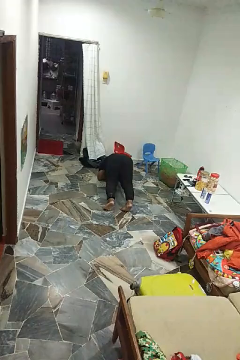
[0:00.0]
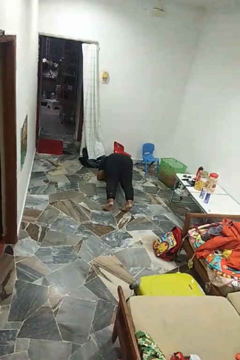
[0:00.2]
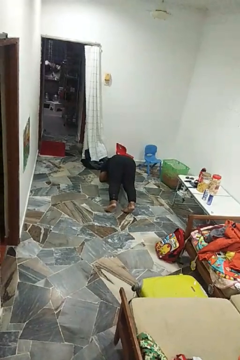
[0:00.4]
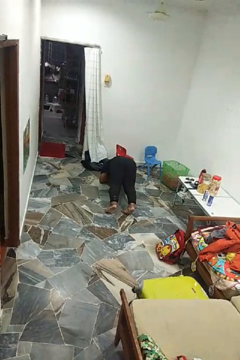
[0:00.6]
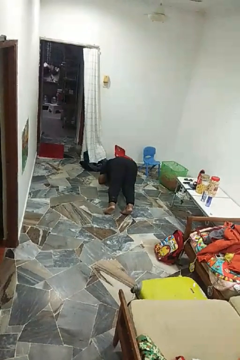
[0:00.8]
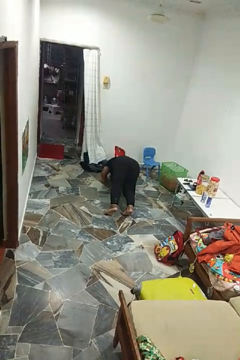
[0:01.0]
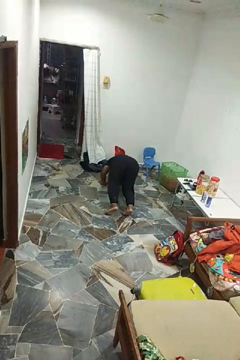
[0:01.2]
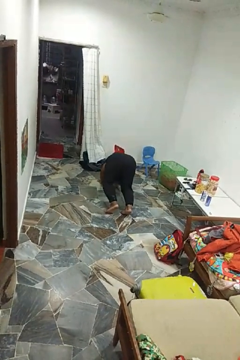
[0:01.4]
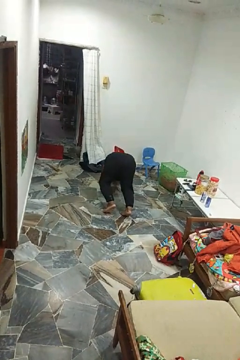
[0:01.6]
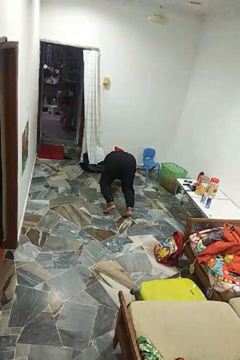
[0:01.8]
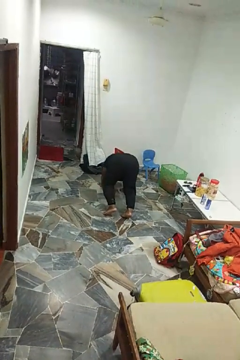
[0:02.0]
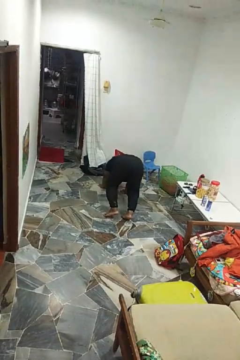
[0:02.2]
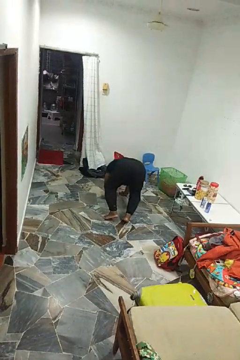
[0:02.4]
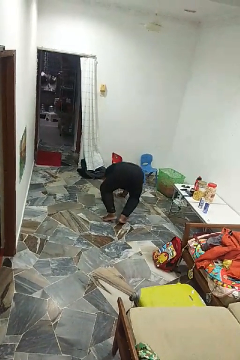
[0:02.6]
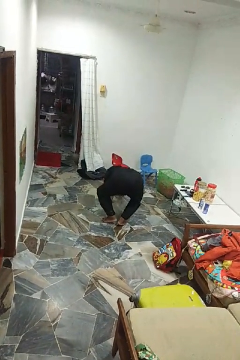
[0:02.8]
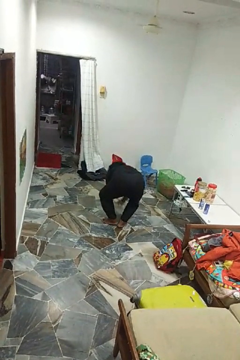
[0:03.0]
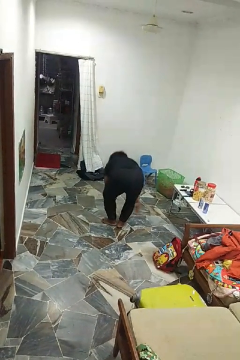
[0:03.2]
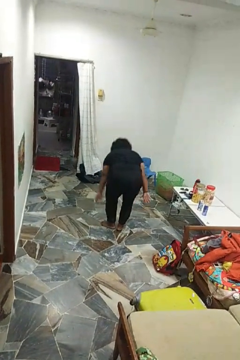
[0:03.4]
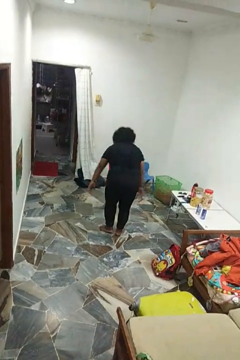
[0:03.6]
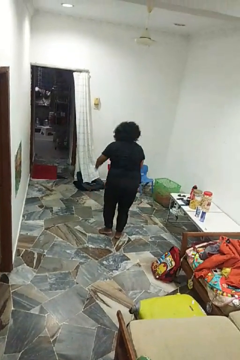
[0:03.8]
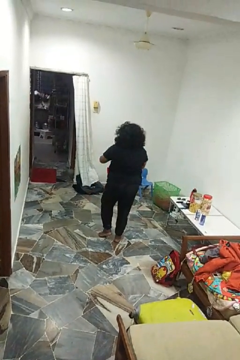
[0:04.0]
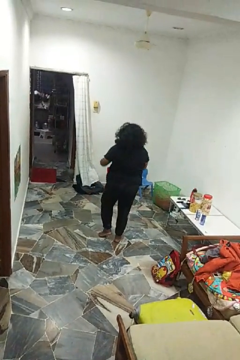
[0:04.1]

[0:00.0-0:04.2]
person stands up from floor

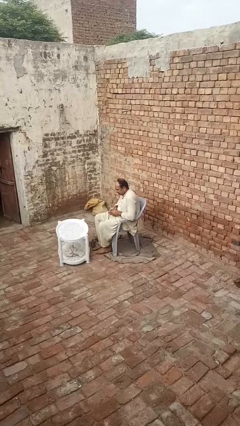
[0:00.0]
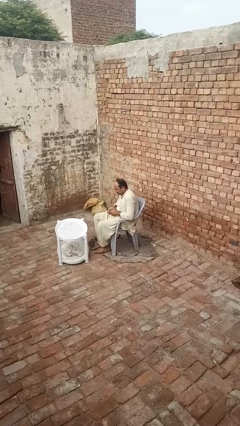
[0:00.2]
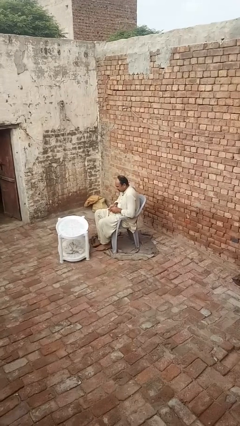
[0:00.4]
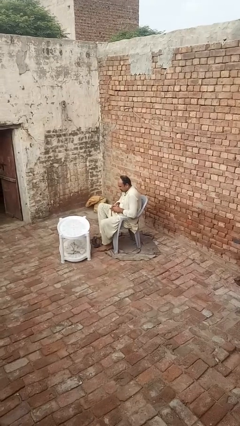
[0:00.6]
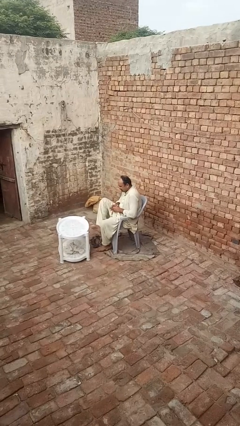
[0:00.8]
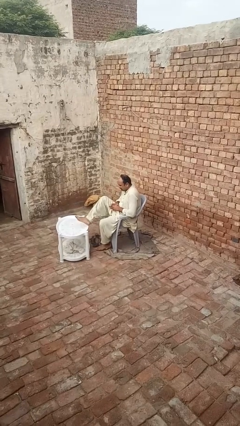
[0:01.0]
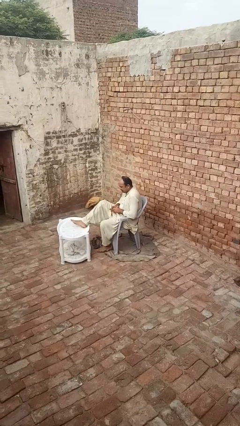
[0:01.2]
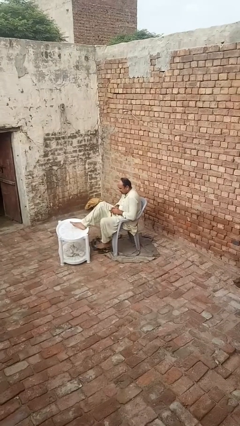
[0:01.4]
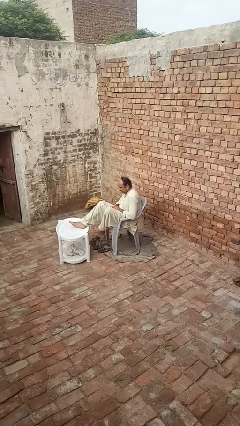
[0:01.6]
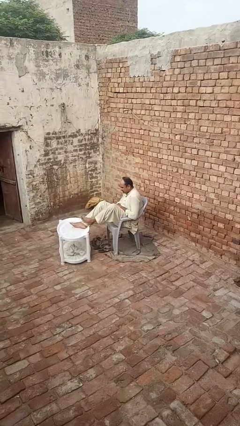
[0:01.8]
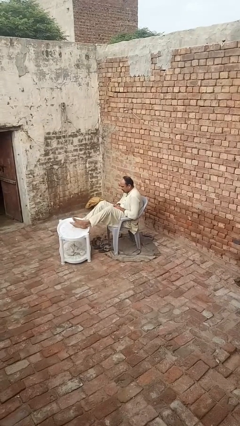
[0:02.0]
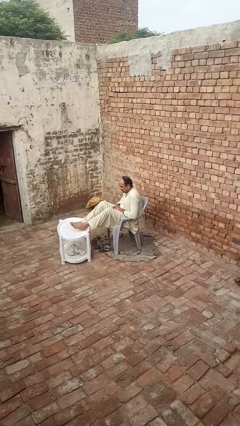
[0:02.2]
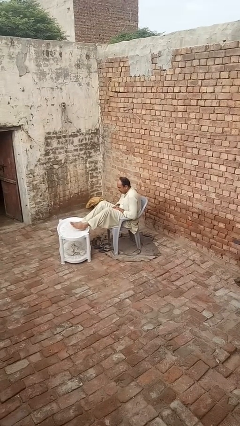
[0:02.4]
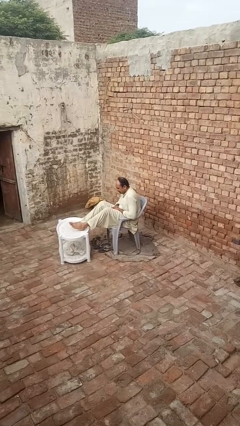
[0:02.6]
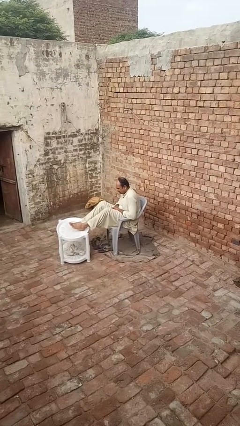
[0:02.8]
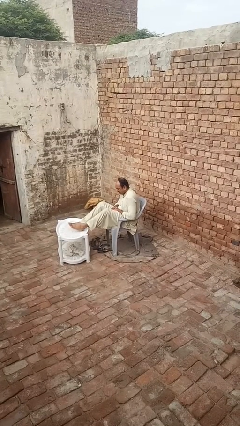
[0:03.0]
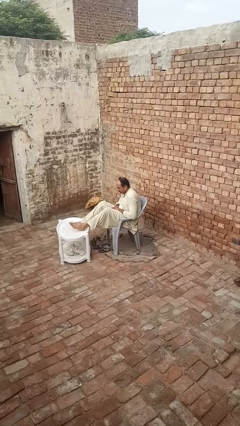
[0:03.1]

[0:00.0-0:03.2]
person puts feet up

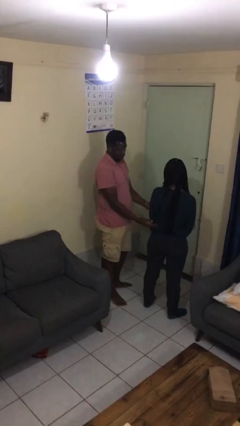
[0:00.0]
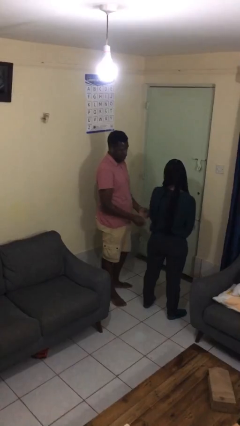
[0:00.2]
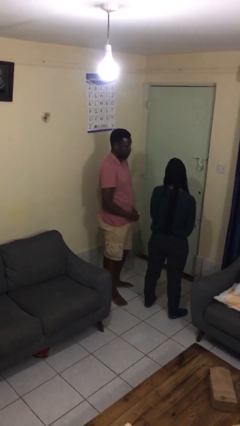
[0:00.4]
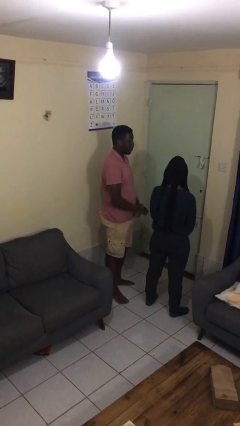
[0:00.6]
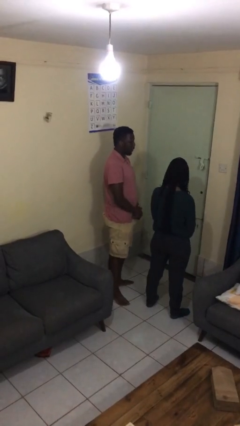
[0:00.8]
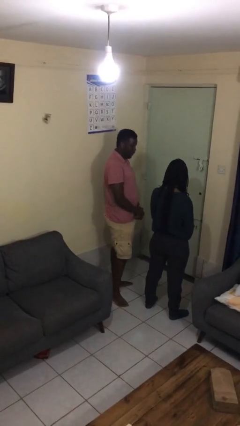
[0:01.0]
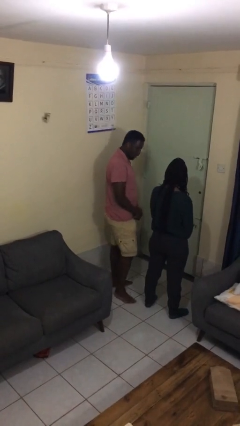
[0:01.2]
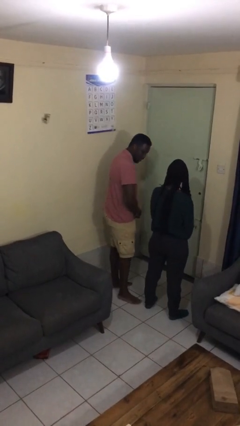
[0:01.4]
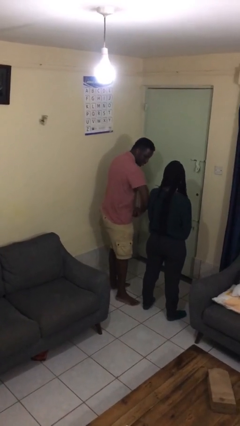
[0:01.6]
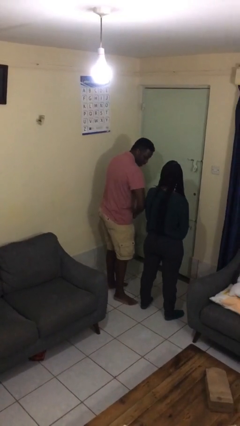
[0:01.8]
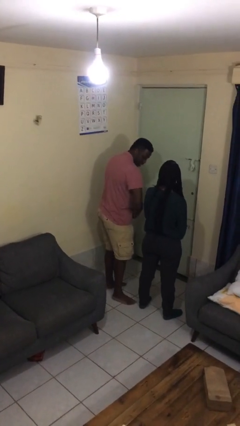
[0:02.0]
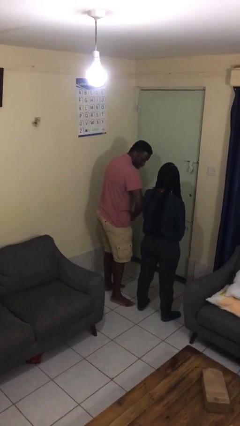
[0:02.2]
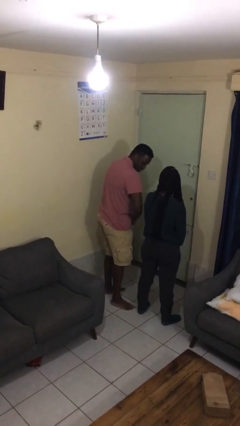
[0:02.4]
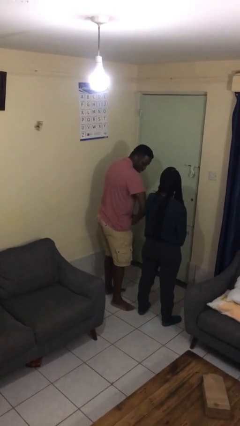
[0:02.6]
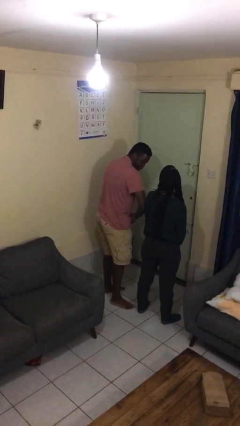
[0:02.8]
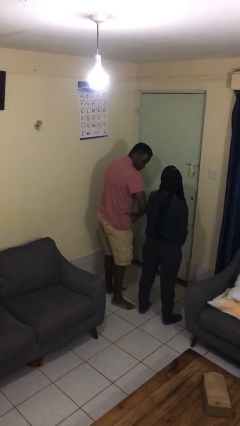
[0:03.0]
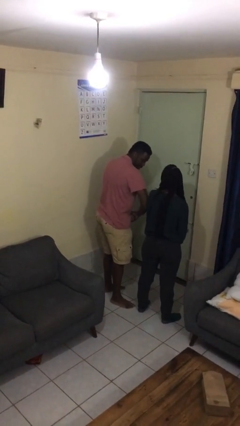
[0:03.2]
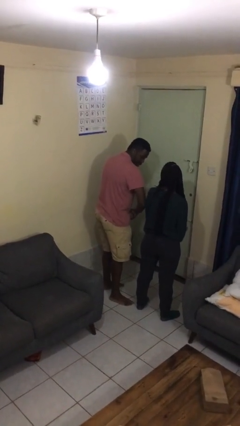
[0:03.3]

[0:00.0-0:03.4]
person nudges person with elbow

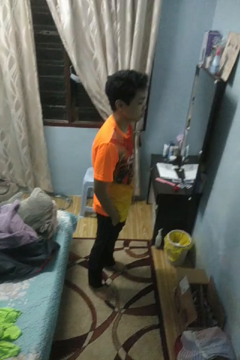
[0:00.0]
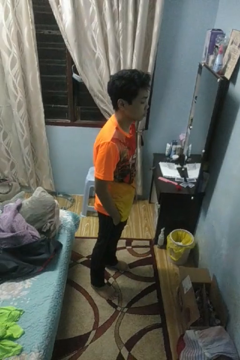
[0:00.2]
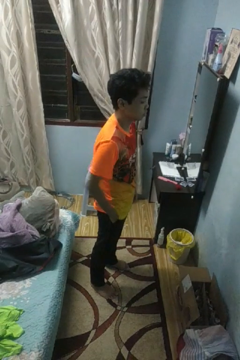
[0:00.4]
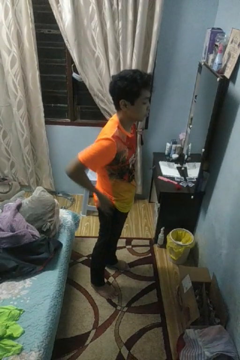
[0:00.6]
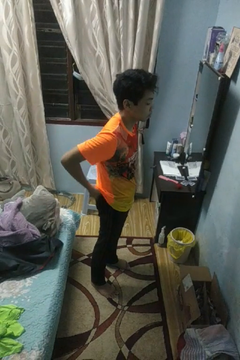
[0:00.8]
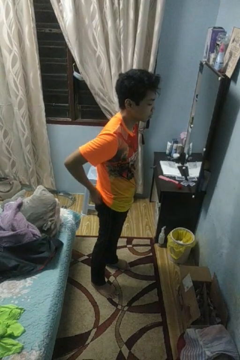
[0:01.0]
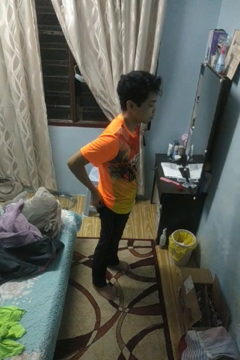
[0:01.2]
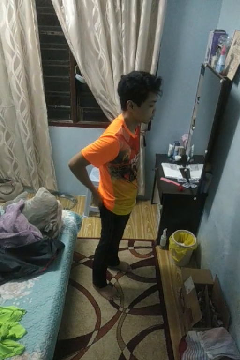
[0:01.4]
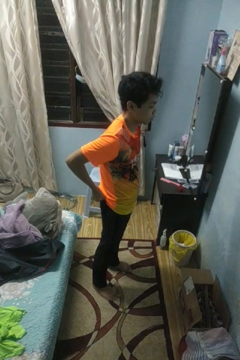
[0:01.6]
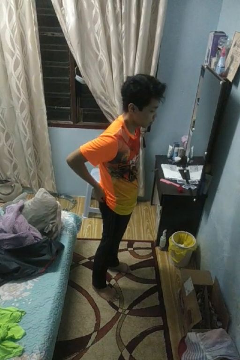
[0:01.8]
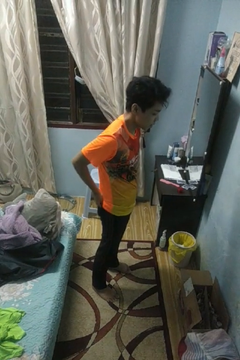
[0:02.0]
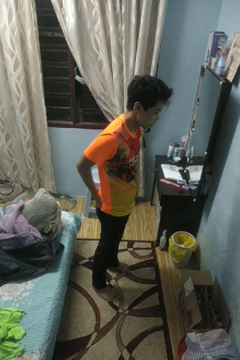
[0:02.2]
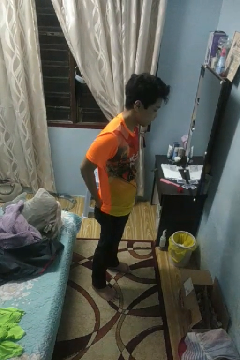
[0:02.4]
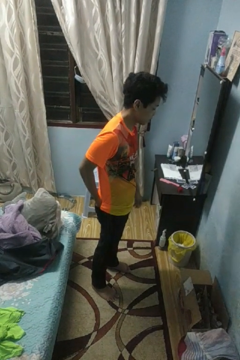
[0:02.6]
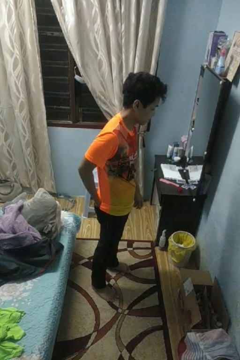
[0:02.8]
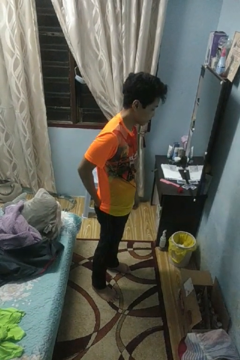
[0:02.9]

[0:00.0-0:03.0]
person puts hands in back pockets

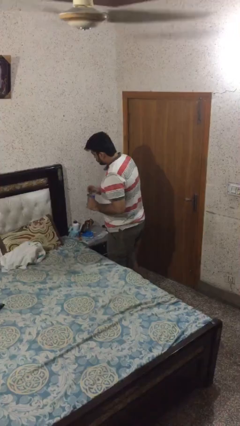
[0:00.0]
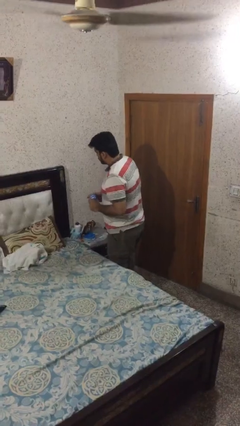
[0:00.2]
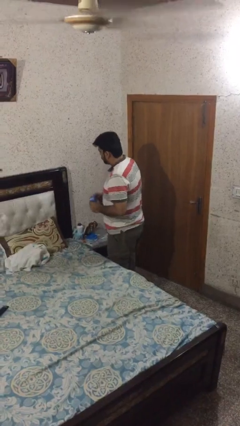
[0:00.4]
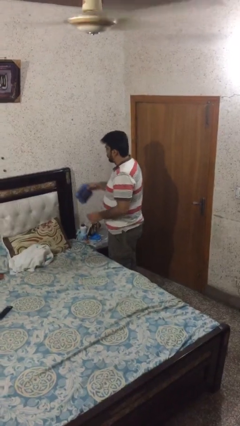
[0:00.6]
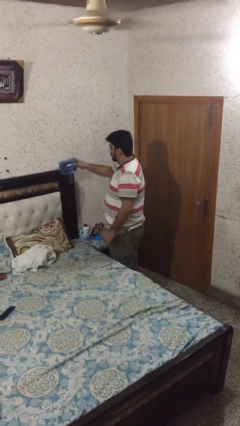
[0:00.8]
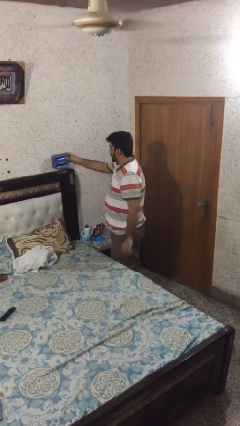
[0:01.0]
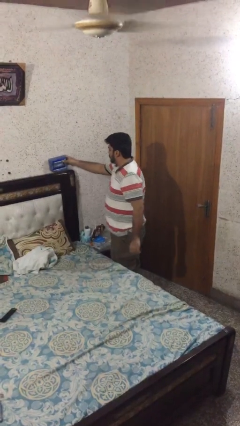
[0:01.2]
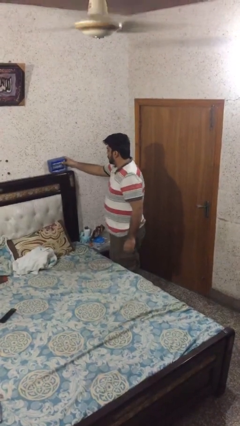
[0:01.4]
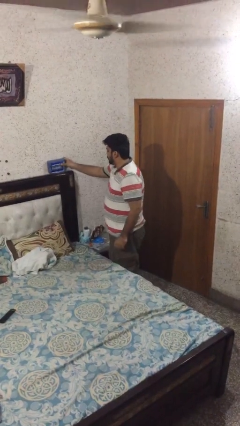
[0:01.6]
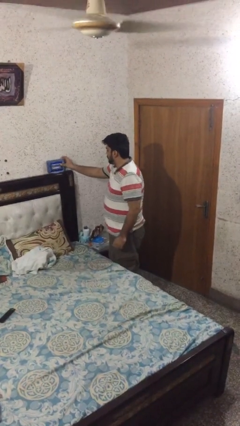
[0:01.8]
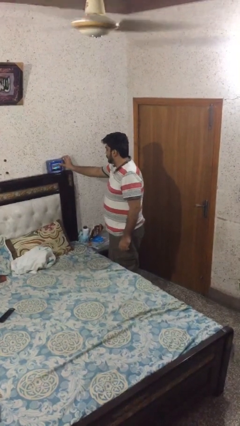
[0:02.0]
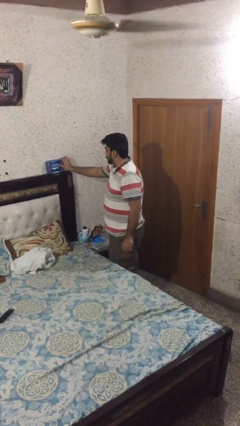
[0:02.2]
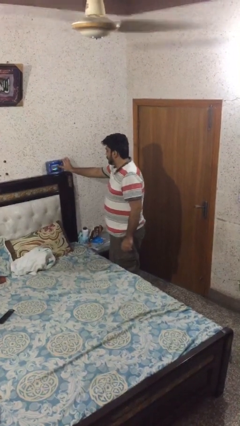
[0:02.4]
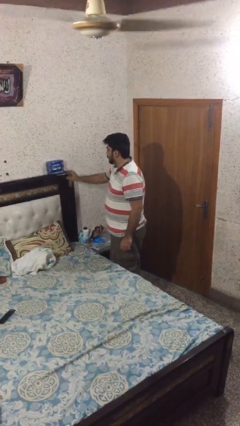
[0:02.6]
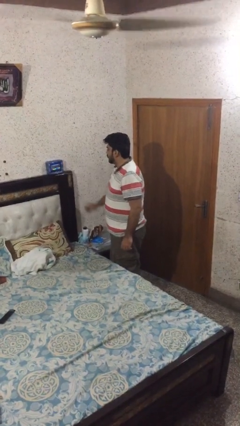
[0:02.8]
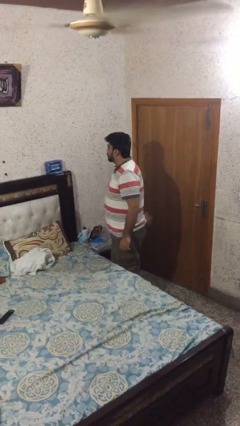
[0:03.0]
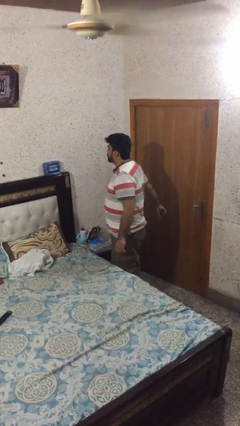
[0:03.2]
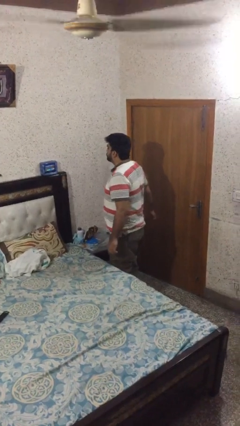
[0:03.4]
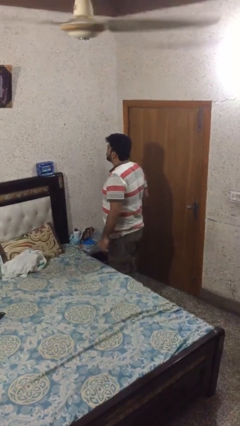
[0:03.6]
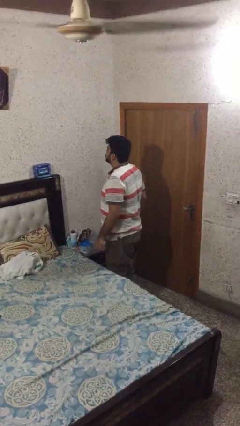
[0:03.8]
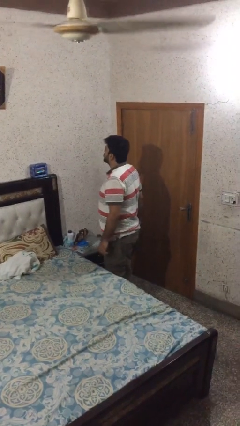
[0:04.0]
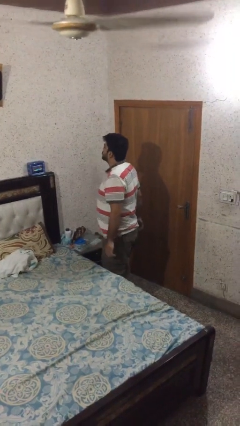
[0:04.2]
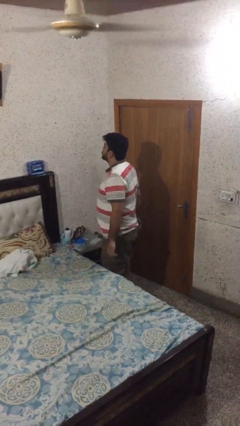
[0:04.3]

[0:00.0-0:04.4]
person puts down object on shelf

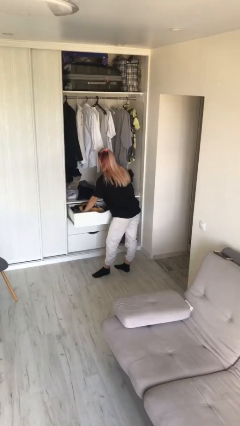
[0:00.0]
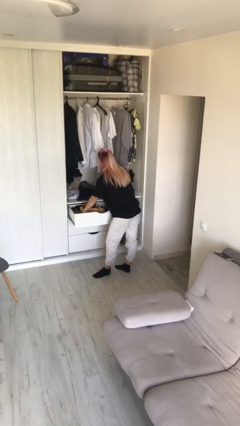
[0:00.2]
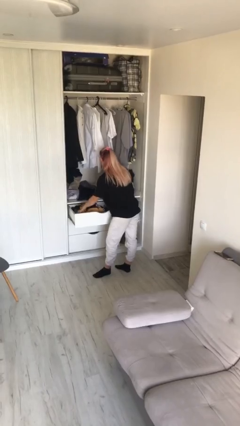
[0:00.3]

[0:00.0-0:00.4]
person puts clothes into dresser
